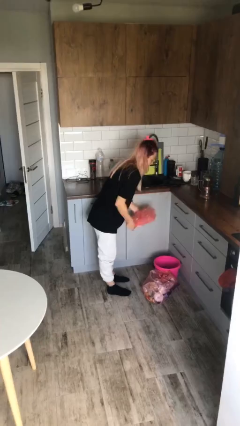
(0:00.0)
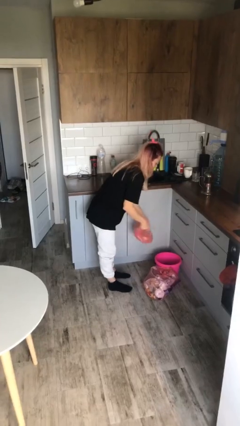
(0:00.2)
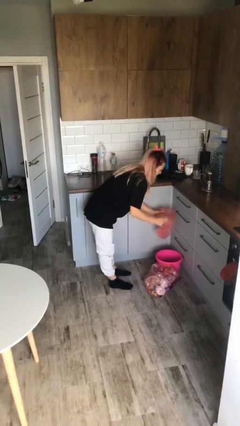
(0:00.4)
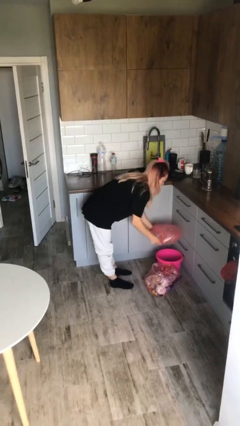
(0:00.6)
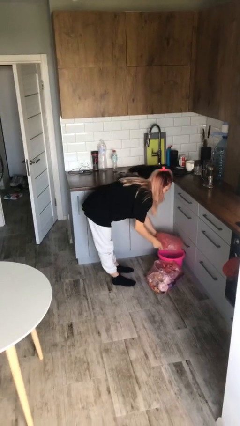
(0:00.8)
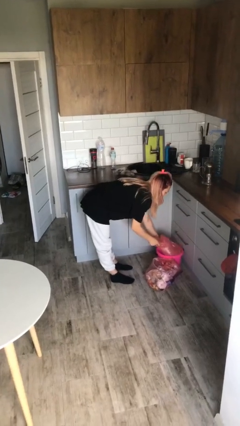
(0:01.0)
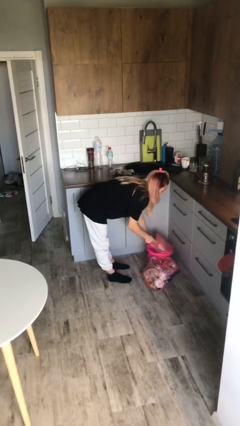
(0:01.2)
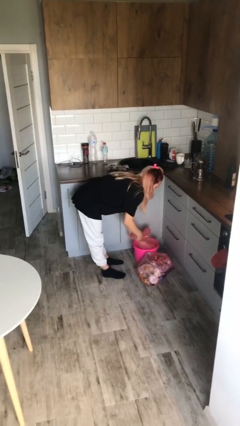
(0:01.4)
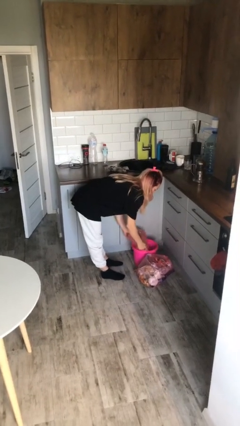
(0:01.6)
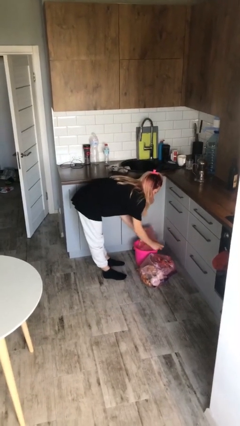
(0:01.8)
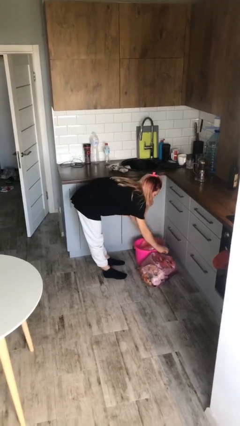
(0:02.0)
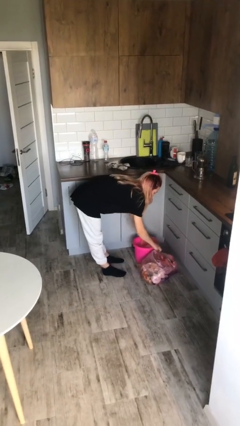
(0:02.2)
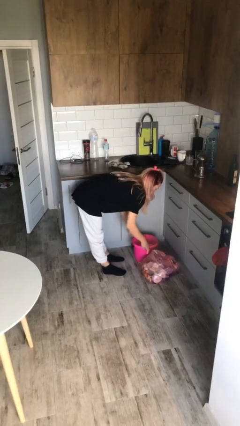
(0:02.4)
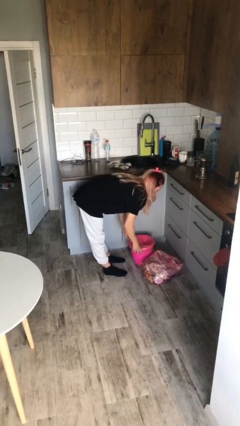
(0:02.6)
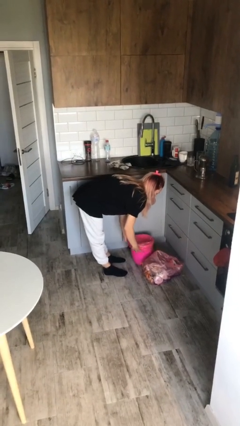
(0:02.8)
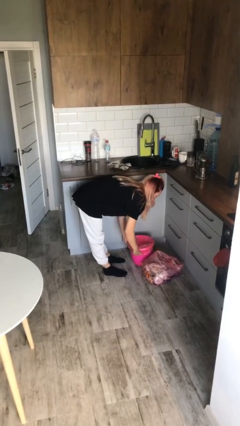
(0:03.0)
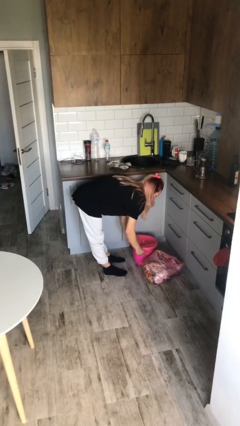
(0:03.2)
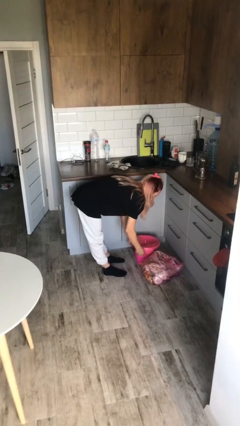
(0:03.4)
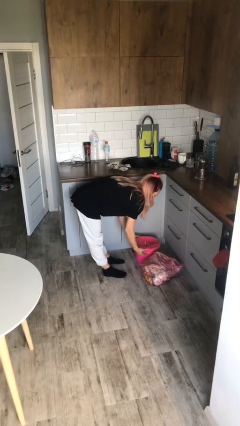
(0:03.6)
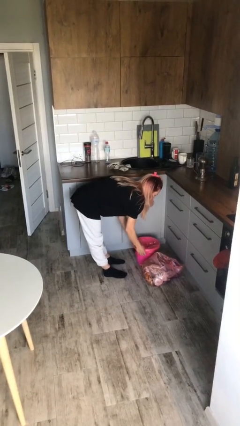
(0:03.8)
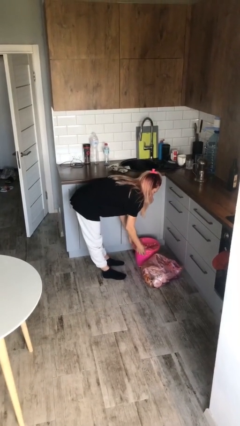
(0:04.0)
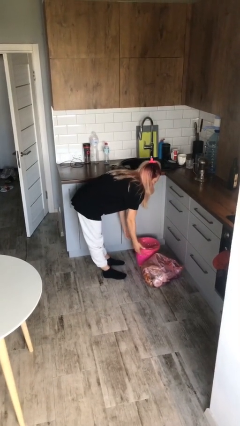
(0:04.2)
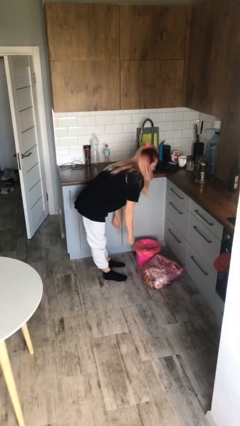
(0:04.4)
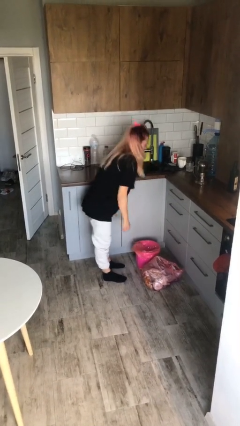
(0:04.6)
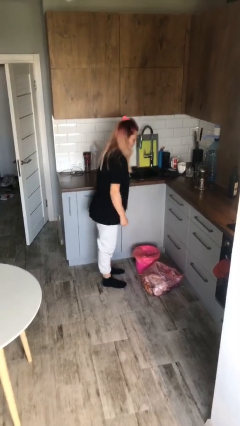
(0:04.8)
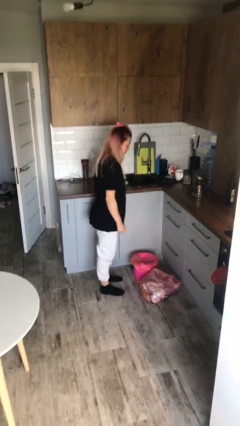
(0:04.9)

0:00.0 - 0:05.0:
person inserts trashbag into trashcan

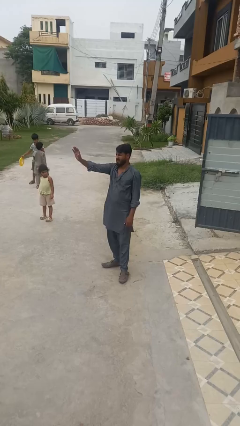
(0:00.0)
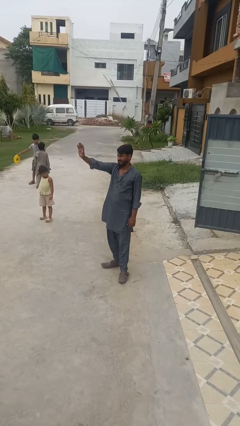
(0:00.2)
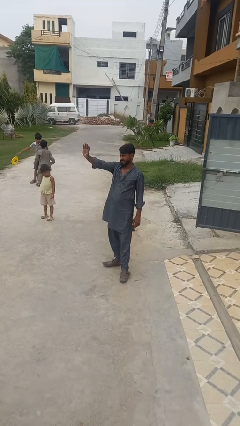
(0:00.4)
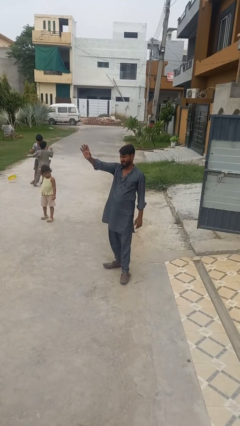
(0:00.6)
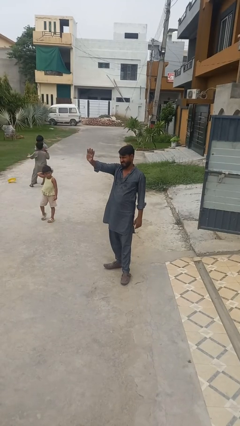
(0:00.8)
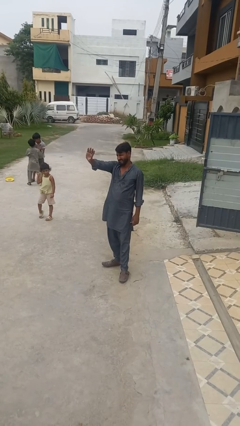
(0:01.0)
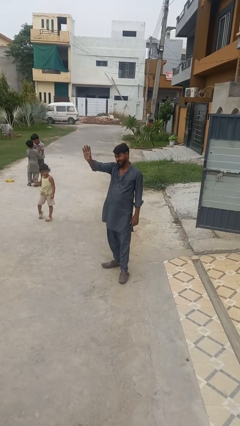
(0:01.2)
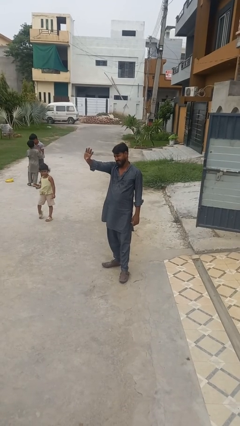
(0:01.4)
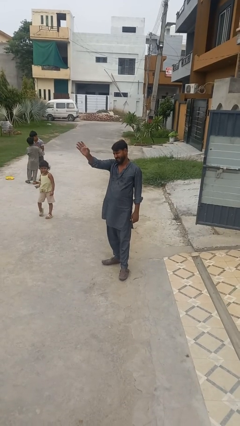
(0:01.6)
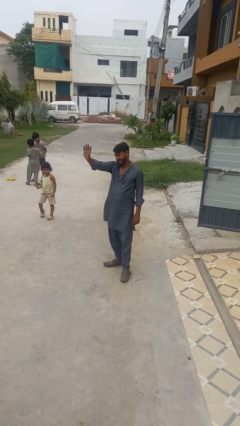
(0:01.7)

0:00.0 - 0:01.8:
person waves at person

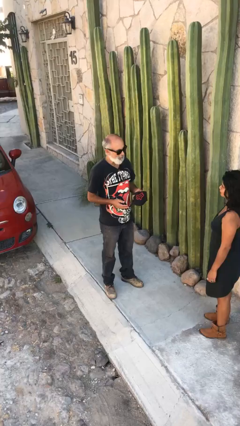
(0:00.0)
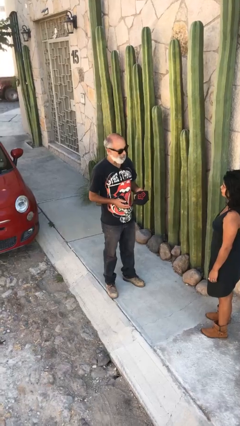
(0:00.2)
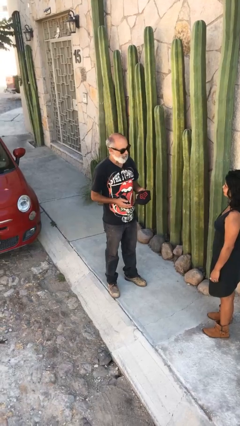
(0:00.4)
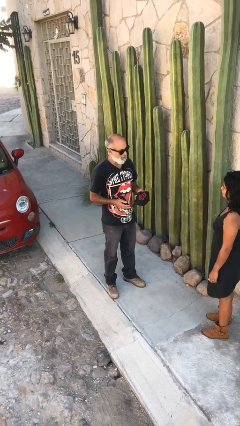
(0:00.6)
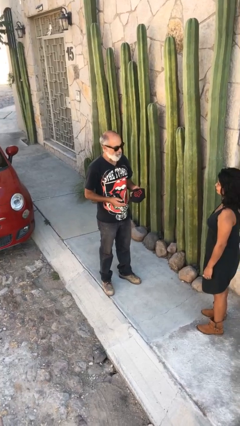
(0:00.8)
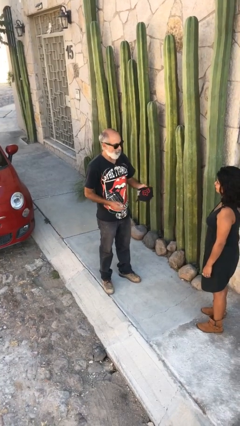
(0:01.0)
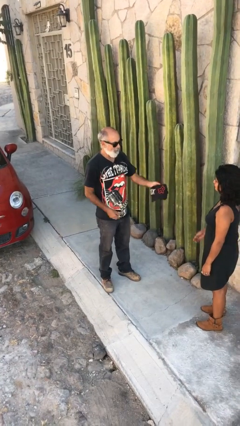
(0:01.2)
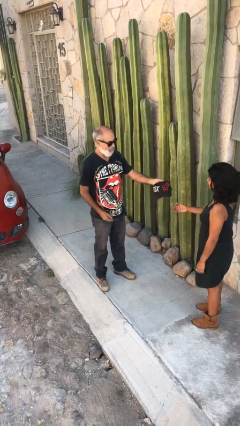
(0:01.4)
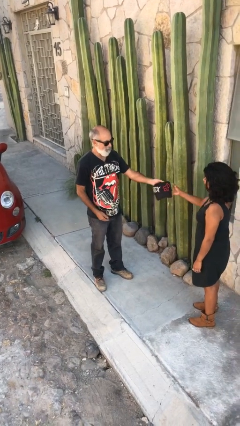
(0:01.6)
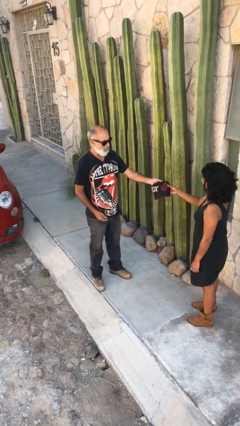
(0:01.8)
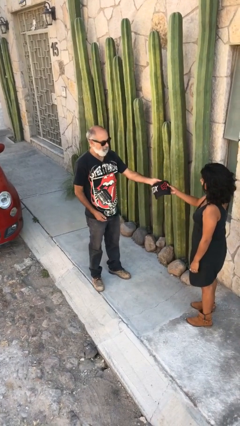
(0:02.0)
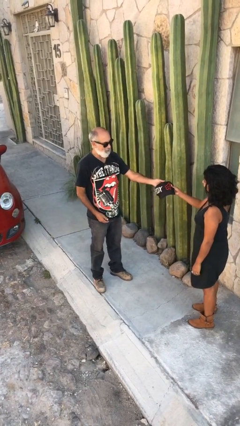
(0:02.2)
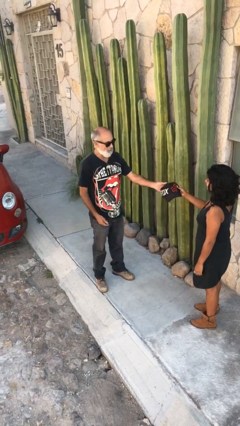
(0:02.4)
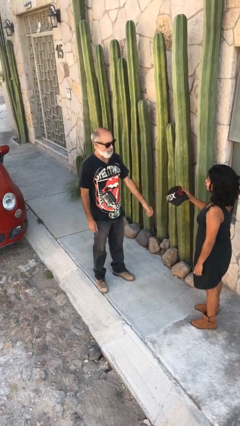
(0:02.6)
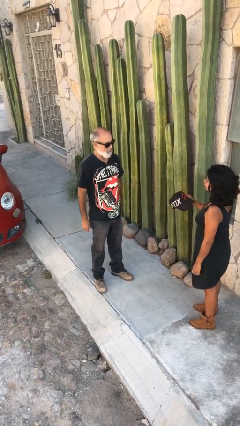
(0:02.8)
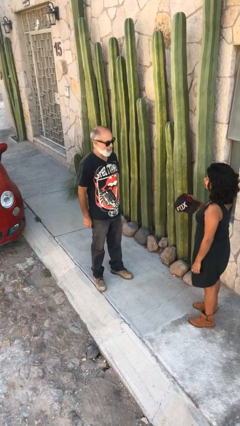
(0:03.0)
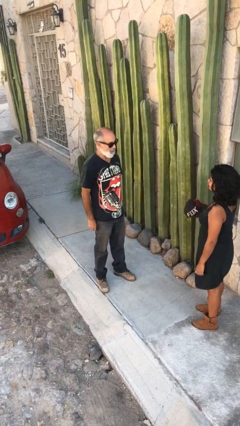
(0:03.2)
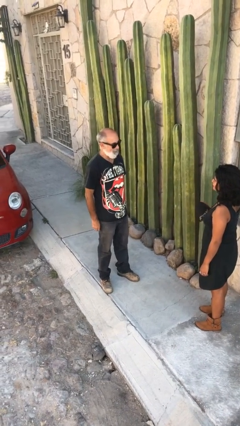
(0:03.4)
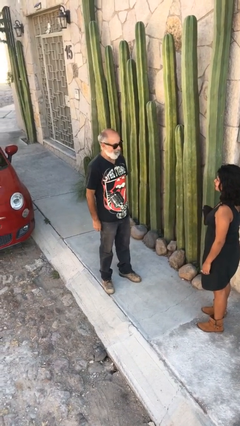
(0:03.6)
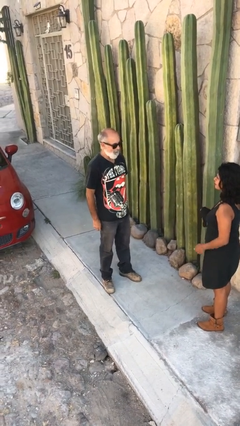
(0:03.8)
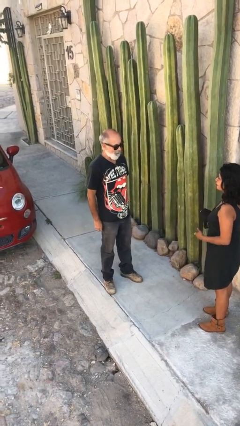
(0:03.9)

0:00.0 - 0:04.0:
person transfers object to person

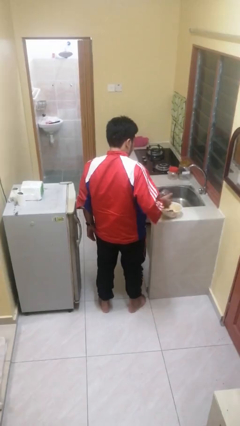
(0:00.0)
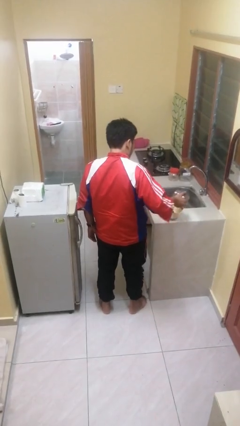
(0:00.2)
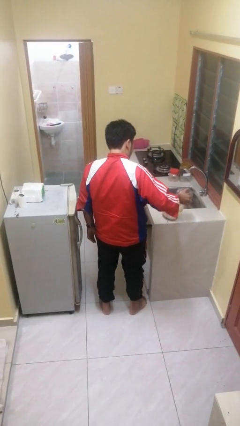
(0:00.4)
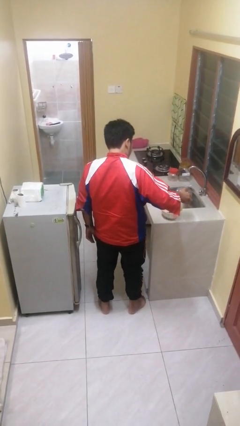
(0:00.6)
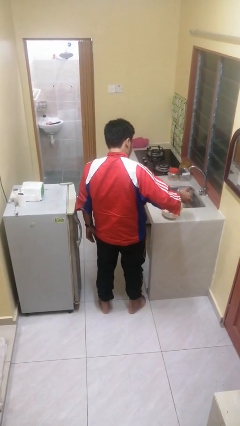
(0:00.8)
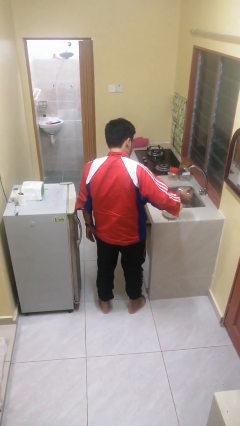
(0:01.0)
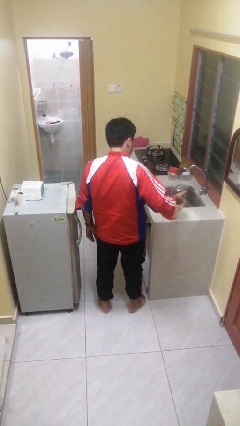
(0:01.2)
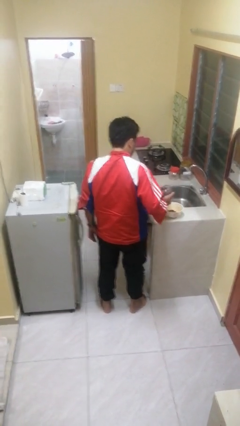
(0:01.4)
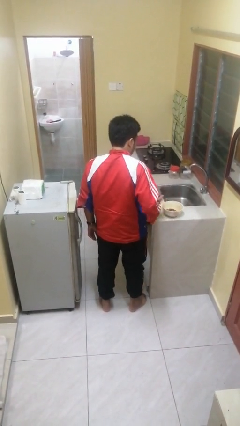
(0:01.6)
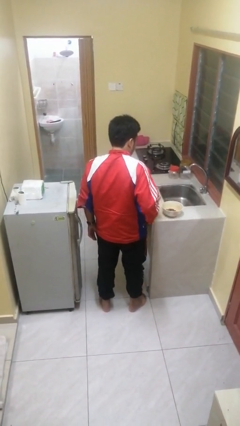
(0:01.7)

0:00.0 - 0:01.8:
person pours into bowl

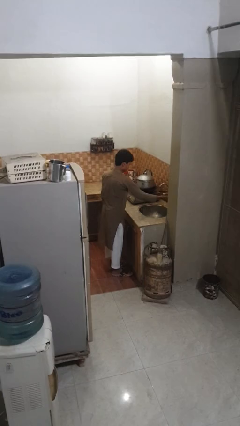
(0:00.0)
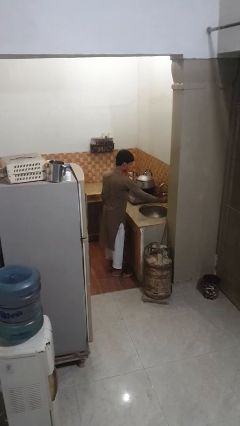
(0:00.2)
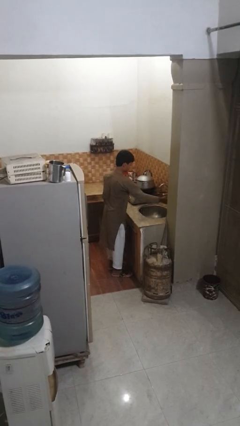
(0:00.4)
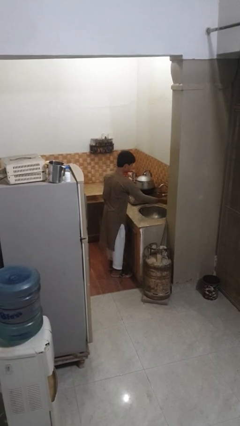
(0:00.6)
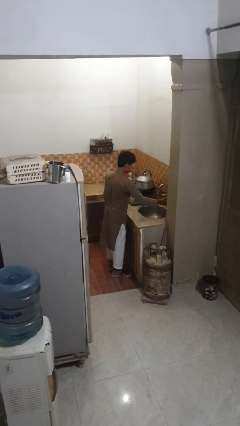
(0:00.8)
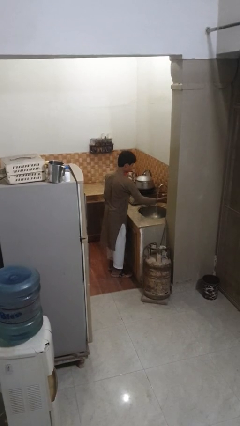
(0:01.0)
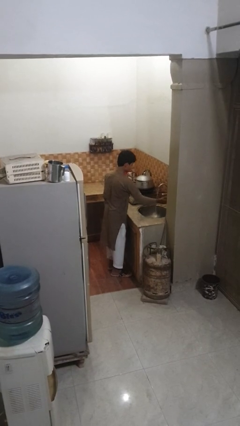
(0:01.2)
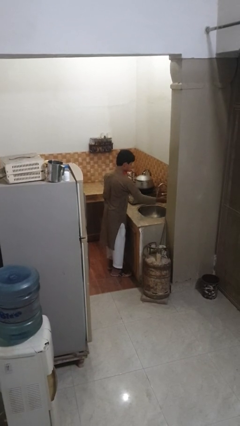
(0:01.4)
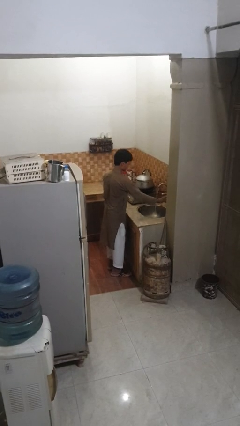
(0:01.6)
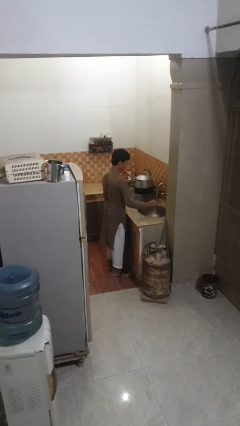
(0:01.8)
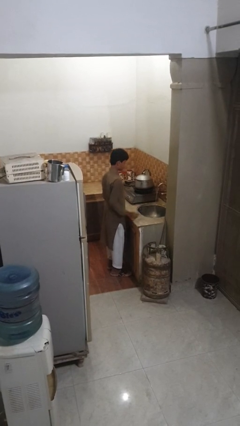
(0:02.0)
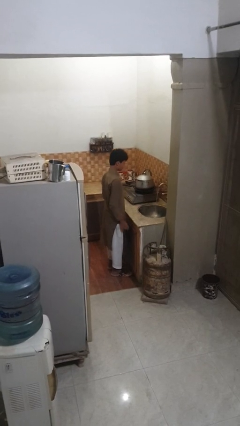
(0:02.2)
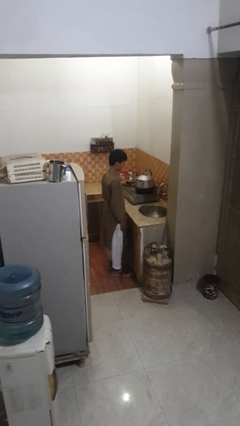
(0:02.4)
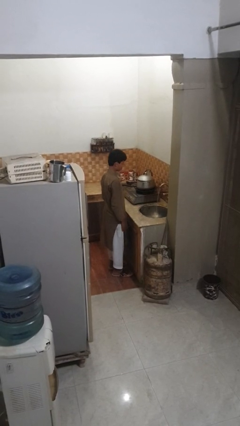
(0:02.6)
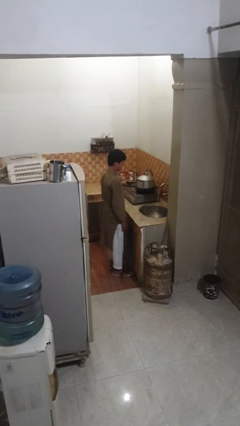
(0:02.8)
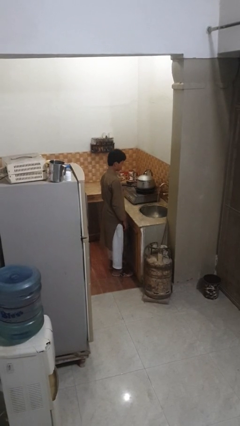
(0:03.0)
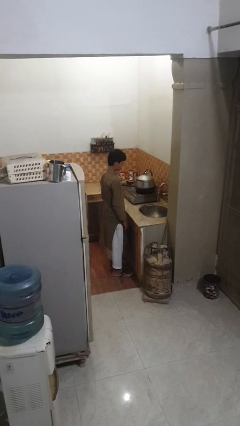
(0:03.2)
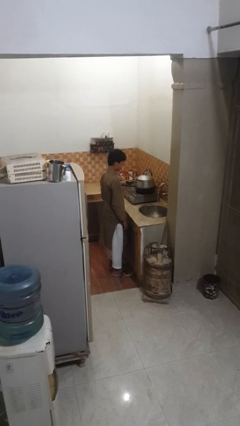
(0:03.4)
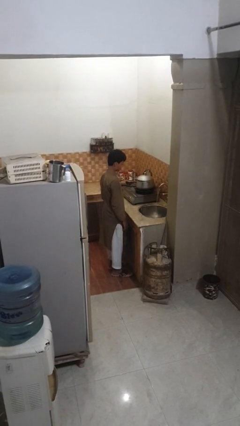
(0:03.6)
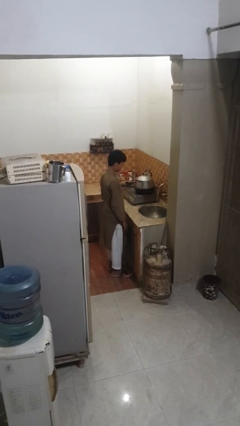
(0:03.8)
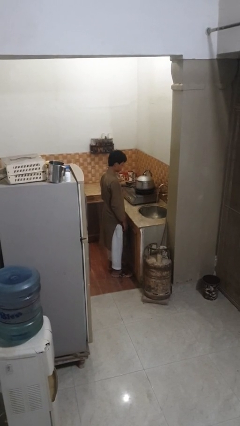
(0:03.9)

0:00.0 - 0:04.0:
person turns on faucet

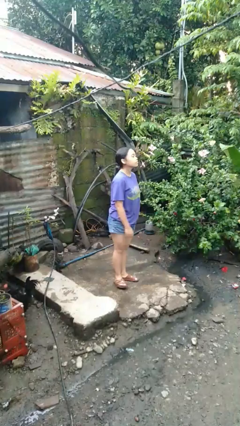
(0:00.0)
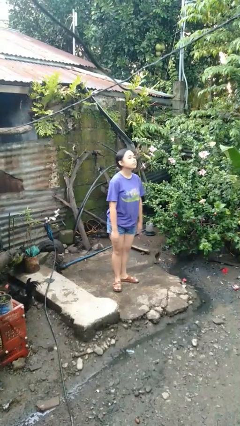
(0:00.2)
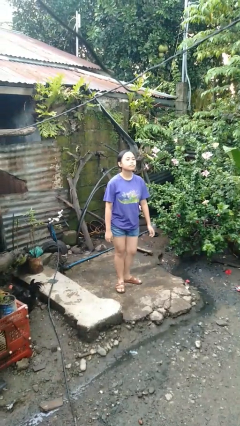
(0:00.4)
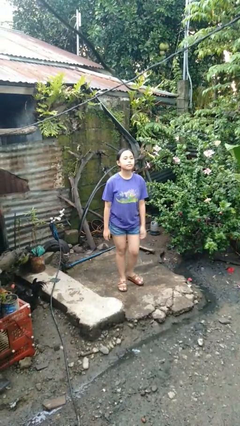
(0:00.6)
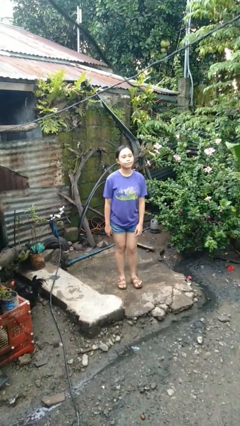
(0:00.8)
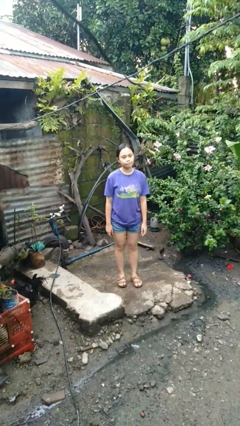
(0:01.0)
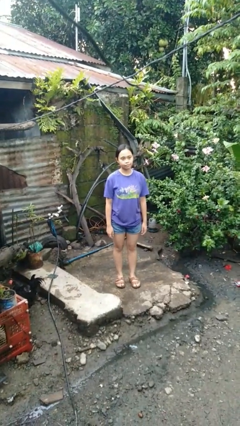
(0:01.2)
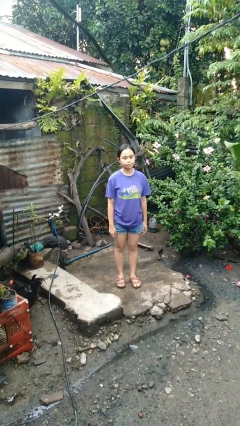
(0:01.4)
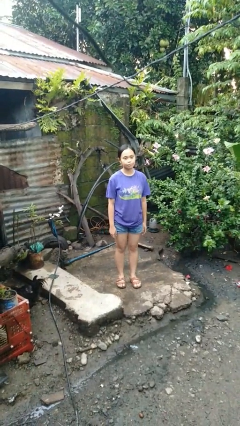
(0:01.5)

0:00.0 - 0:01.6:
person shrugs
